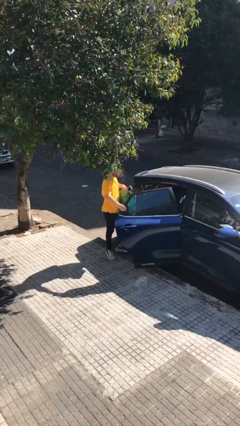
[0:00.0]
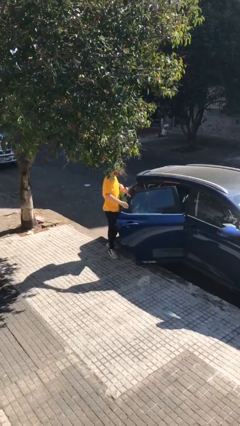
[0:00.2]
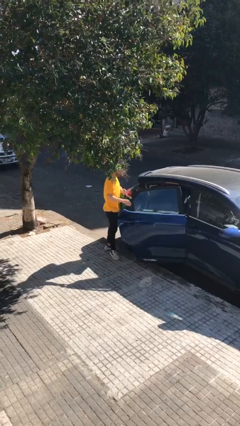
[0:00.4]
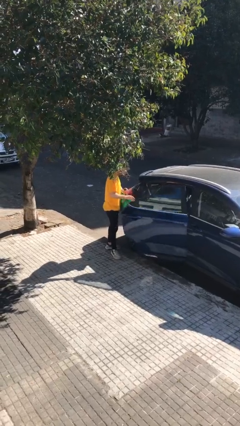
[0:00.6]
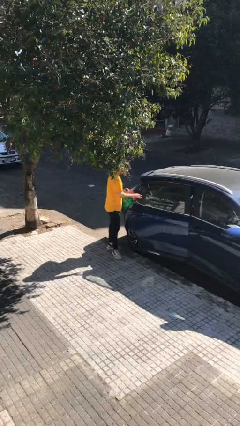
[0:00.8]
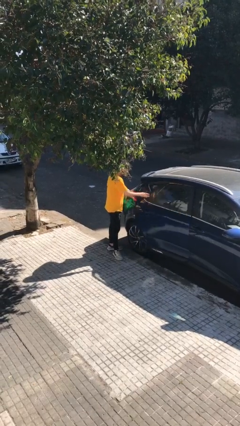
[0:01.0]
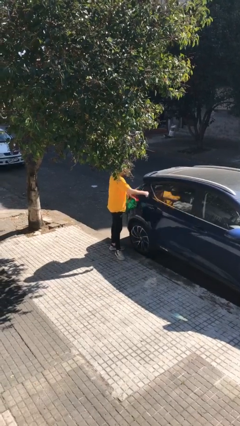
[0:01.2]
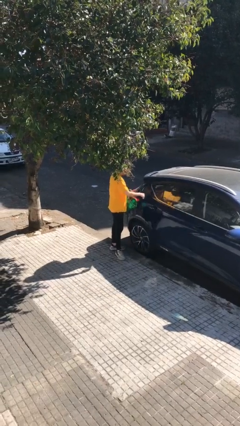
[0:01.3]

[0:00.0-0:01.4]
person closes car door

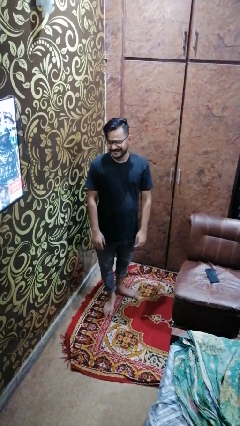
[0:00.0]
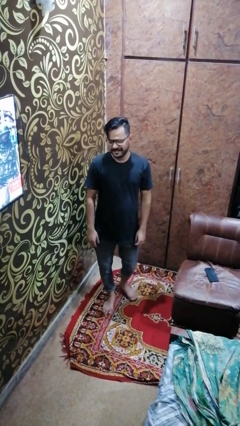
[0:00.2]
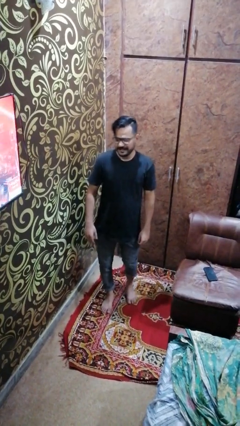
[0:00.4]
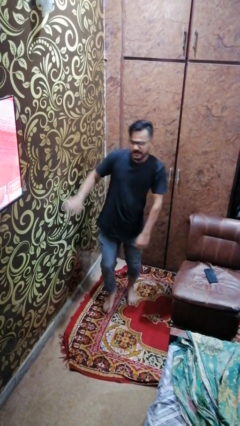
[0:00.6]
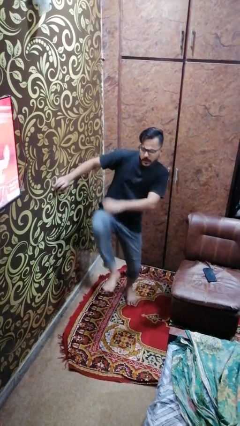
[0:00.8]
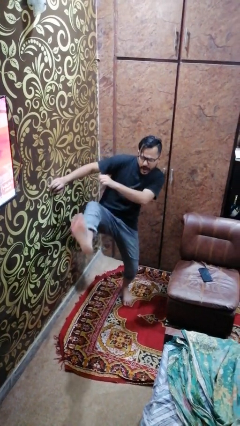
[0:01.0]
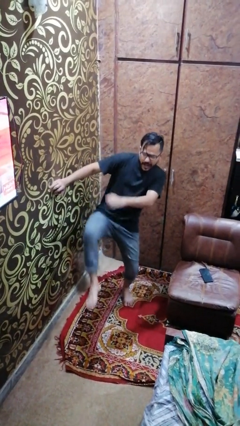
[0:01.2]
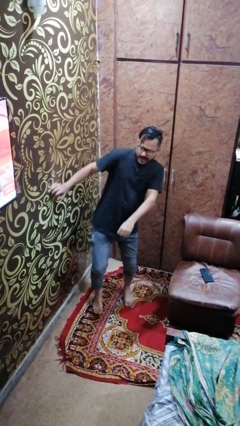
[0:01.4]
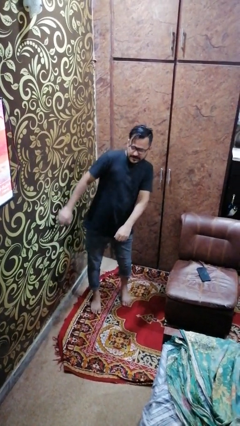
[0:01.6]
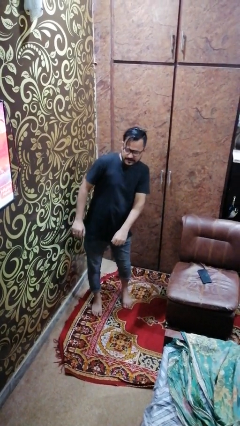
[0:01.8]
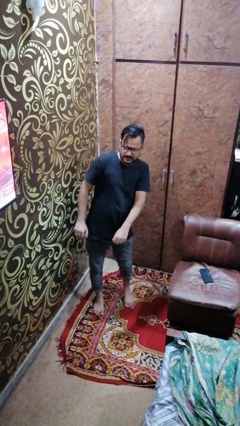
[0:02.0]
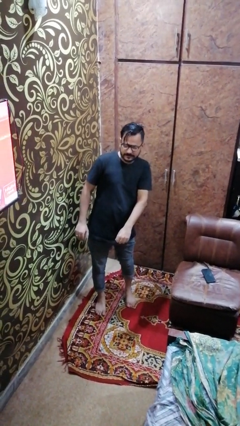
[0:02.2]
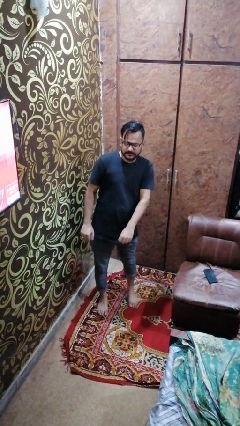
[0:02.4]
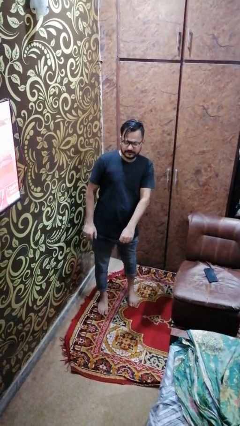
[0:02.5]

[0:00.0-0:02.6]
person karate kicks

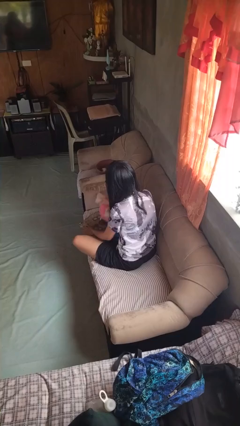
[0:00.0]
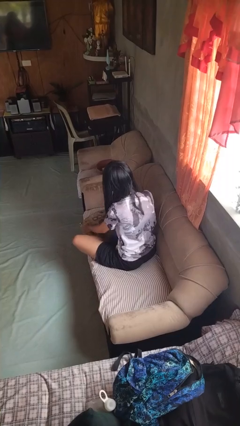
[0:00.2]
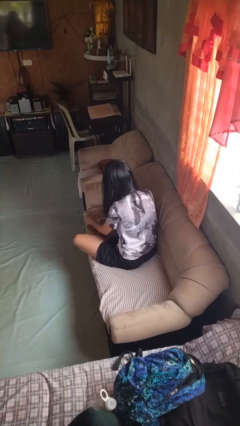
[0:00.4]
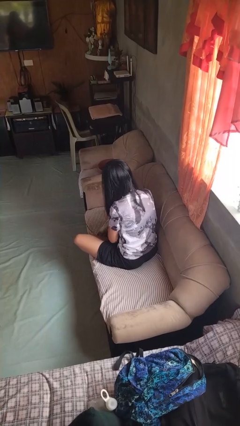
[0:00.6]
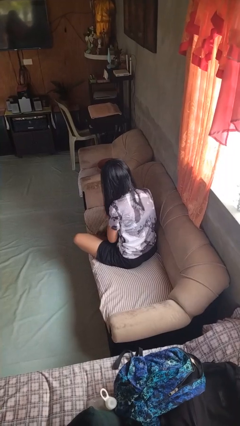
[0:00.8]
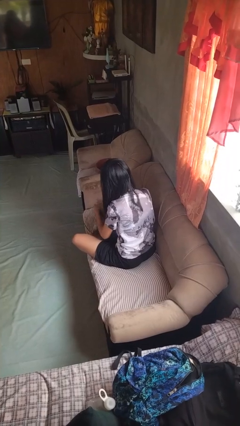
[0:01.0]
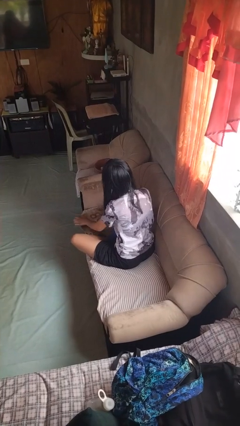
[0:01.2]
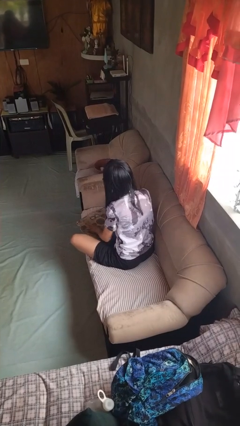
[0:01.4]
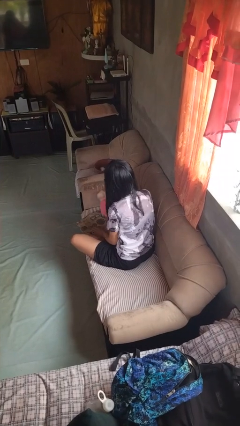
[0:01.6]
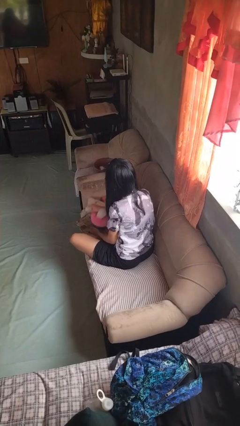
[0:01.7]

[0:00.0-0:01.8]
person searches in couch

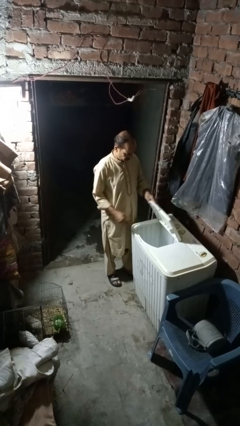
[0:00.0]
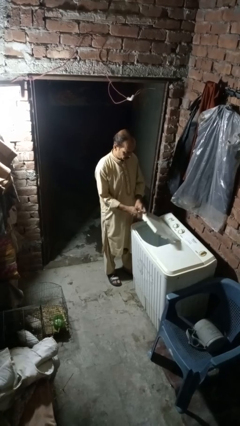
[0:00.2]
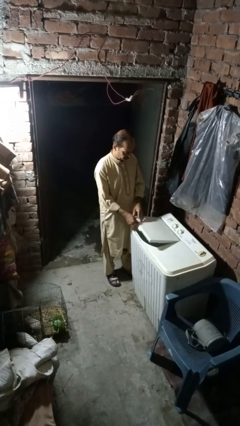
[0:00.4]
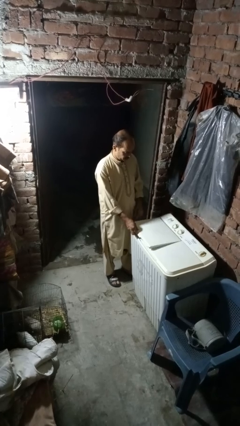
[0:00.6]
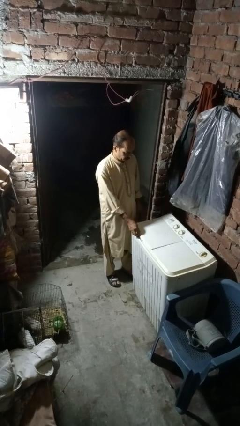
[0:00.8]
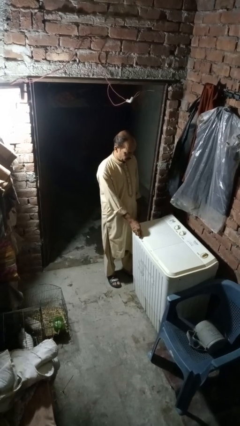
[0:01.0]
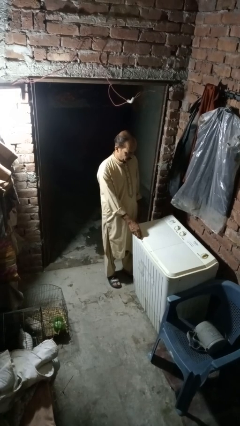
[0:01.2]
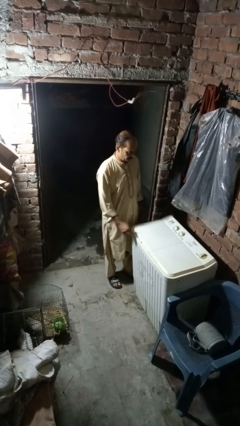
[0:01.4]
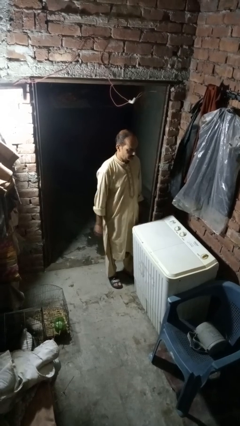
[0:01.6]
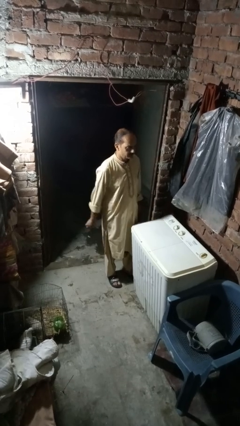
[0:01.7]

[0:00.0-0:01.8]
person closes clothes washer

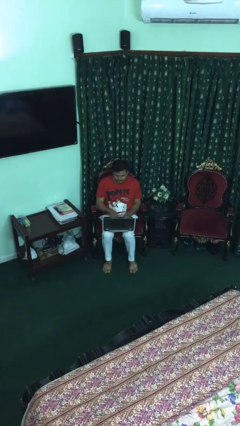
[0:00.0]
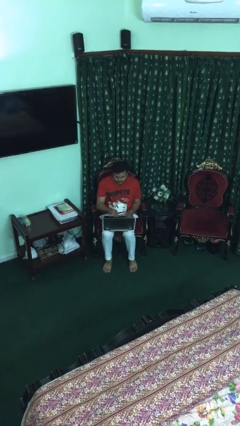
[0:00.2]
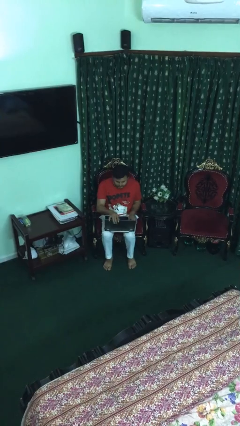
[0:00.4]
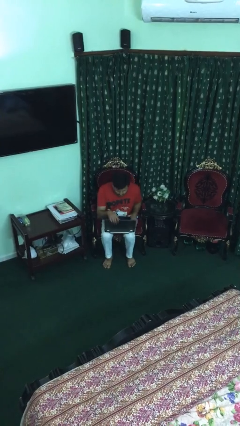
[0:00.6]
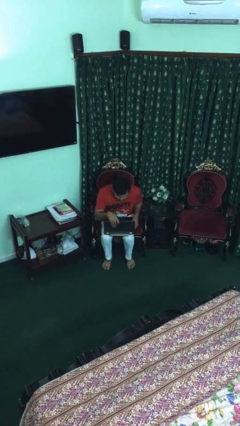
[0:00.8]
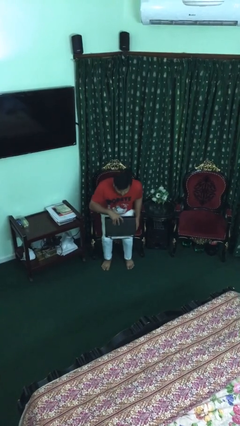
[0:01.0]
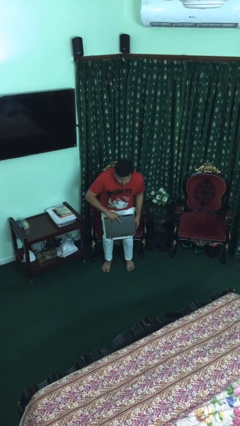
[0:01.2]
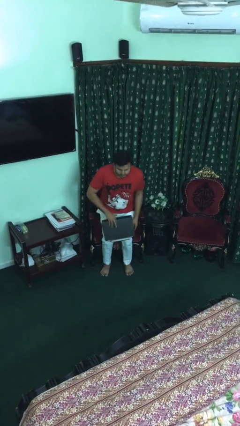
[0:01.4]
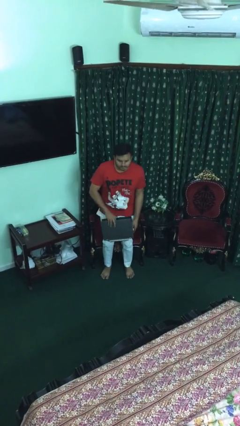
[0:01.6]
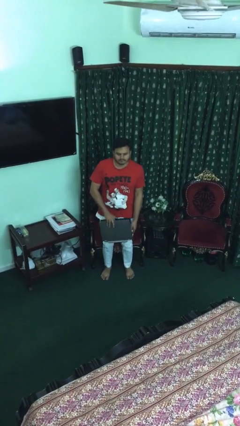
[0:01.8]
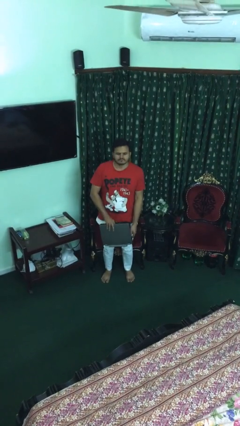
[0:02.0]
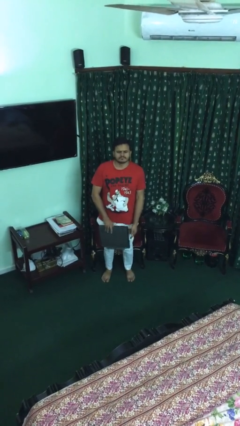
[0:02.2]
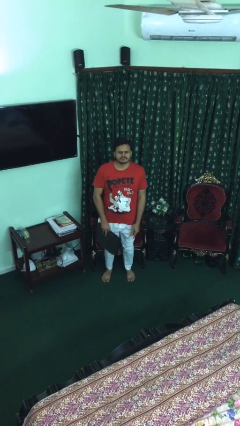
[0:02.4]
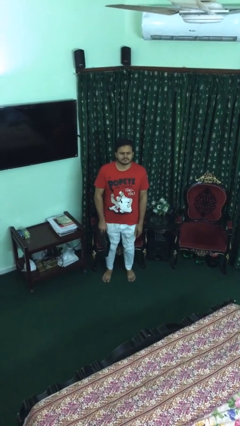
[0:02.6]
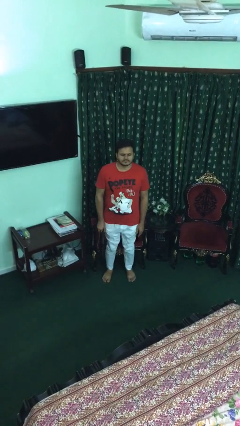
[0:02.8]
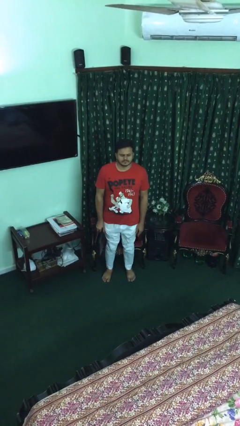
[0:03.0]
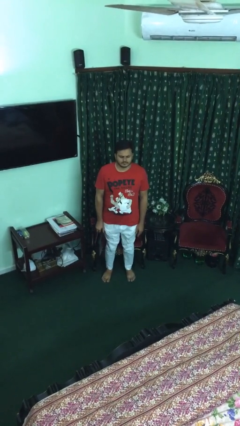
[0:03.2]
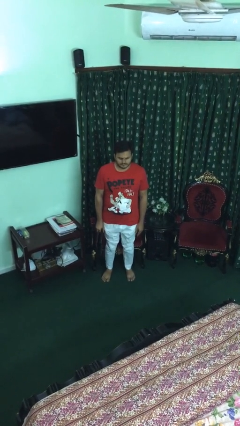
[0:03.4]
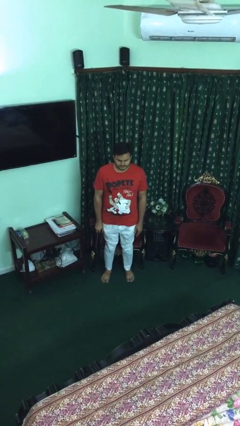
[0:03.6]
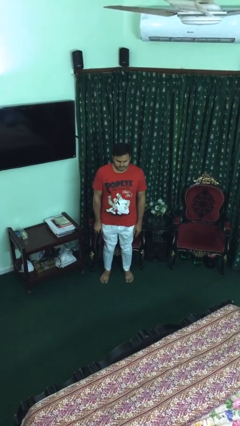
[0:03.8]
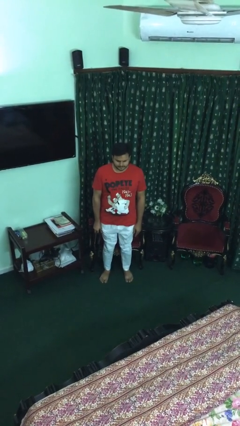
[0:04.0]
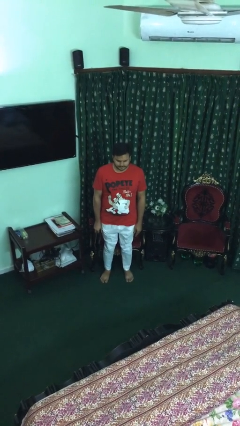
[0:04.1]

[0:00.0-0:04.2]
person stands up

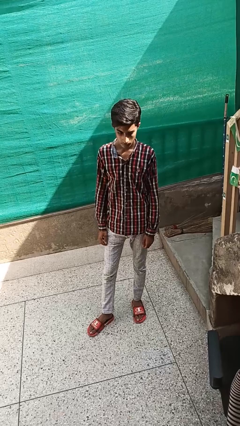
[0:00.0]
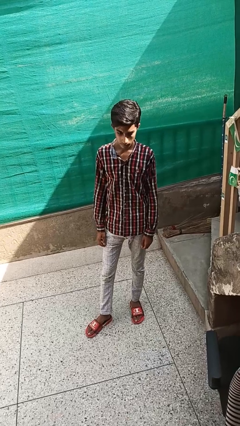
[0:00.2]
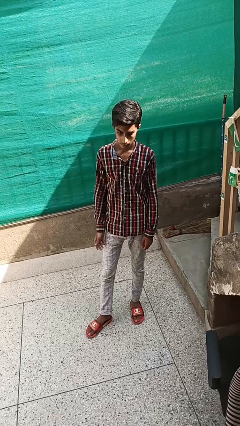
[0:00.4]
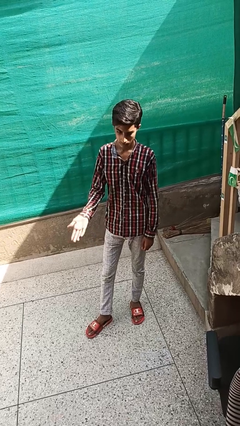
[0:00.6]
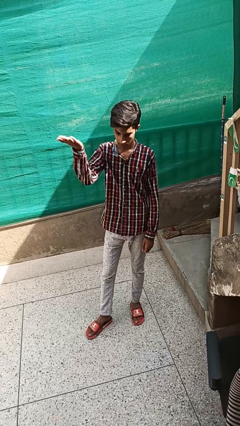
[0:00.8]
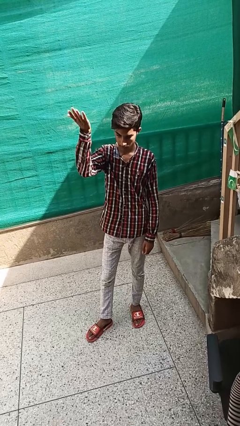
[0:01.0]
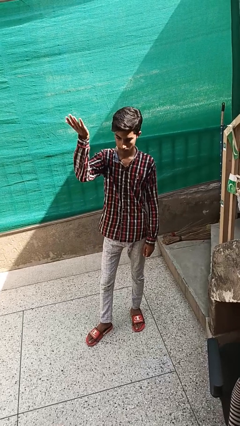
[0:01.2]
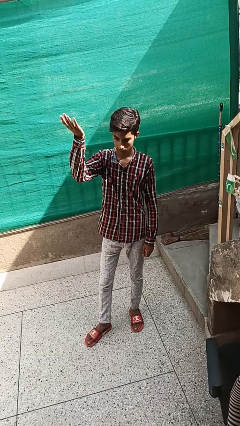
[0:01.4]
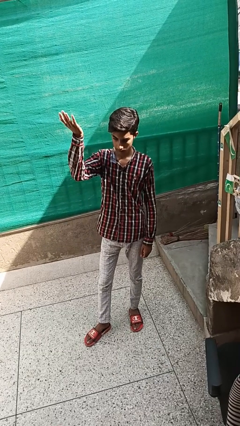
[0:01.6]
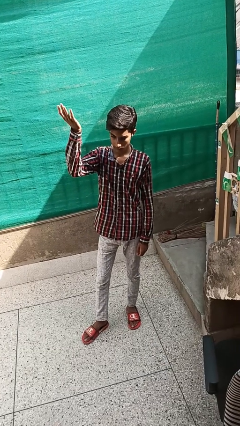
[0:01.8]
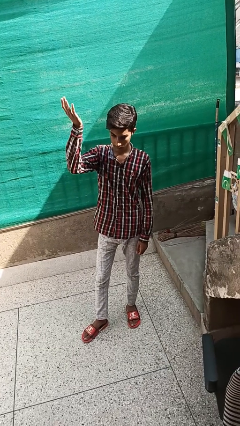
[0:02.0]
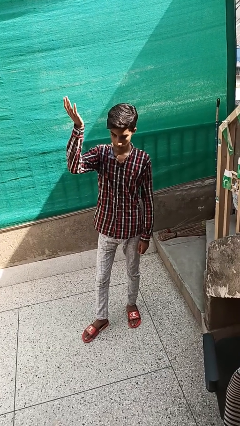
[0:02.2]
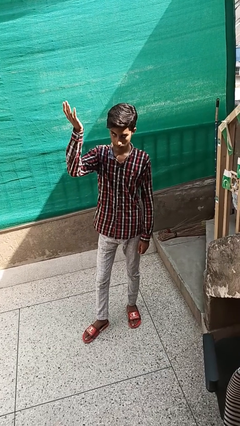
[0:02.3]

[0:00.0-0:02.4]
person gestures swipe up

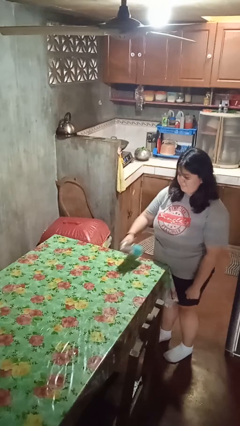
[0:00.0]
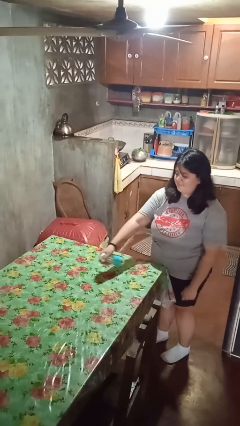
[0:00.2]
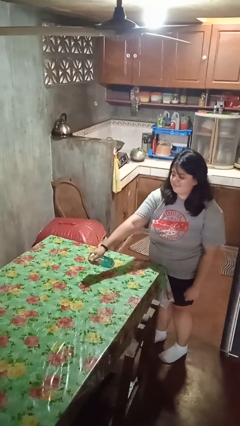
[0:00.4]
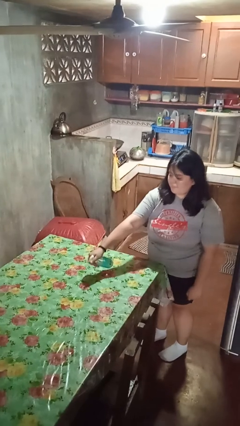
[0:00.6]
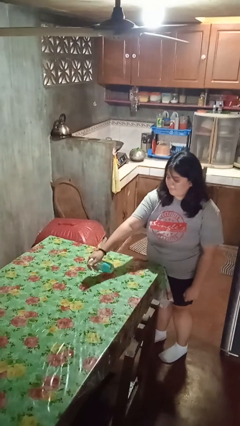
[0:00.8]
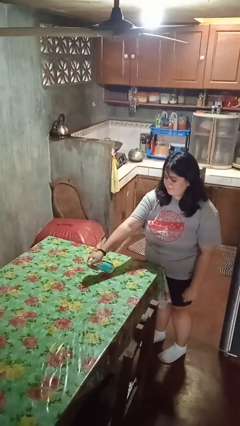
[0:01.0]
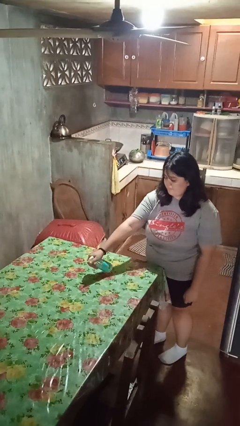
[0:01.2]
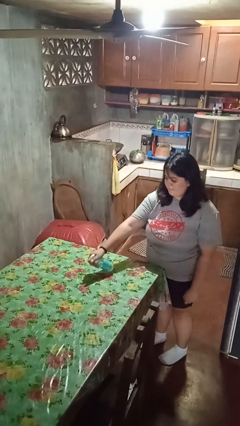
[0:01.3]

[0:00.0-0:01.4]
person sprays from bottle

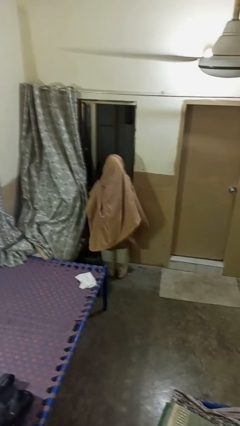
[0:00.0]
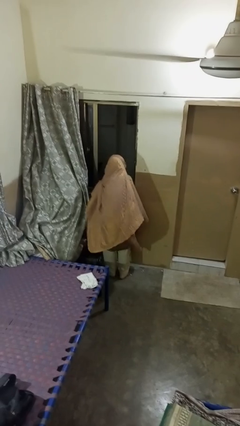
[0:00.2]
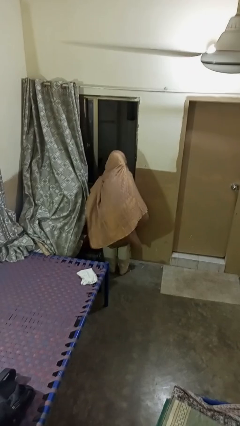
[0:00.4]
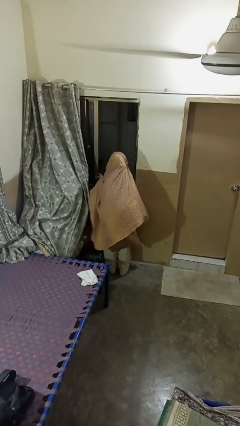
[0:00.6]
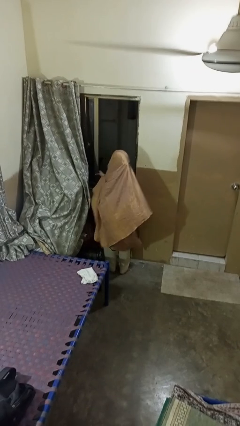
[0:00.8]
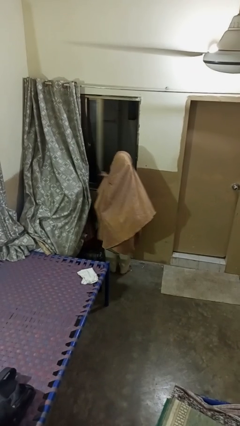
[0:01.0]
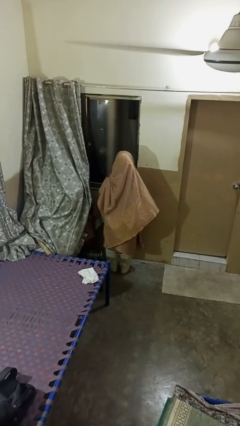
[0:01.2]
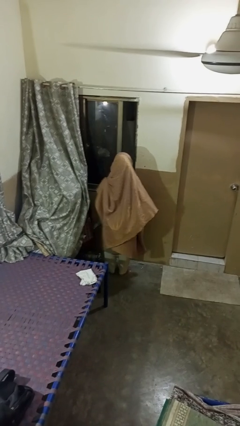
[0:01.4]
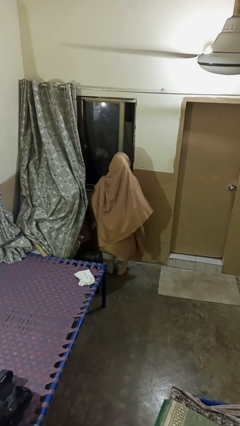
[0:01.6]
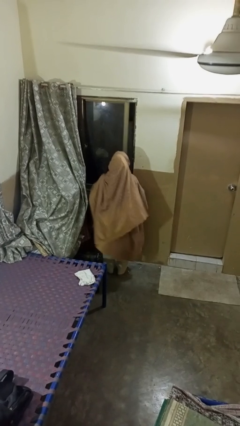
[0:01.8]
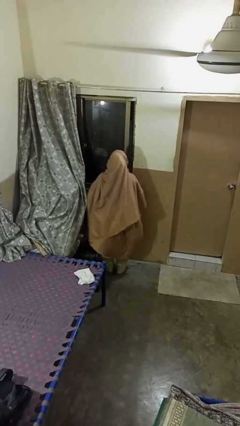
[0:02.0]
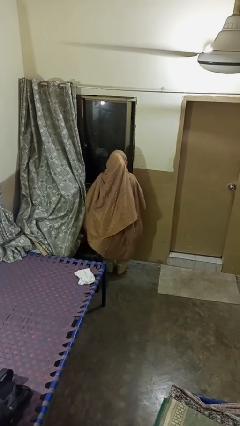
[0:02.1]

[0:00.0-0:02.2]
person closes home window
